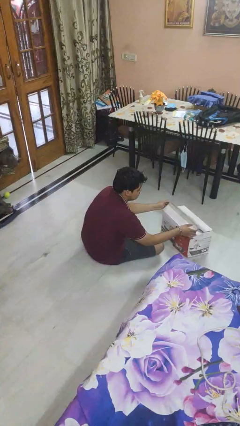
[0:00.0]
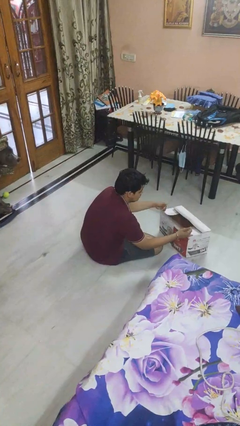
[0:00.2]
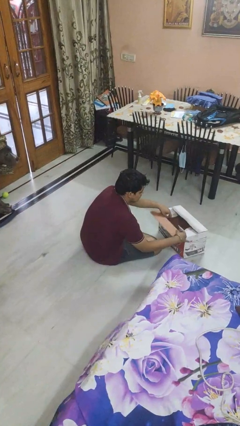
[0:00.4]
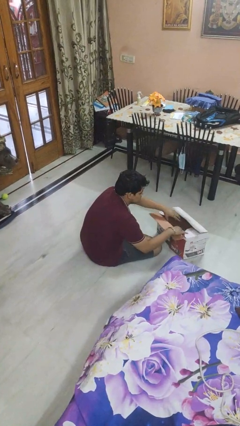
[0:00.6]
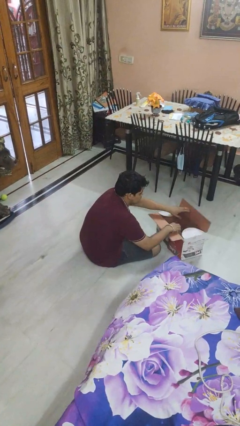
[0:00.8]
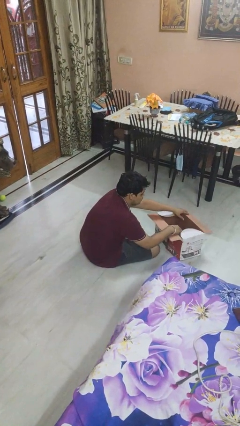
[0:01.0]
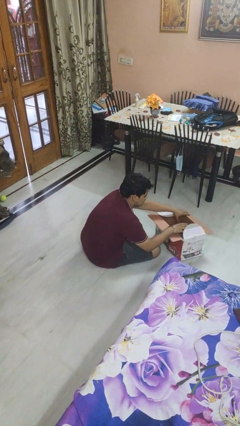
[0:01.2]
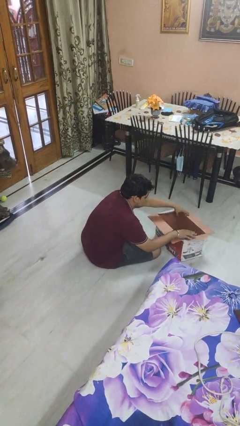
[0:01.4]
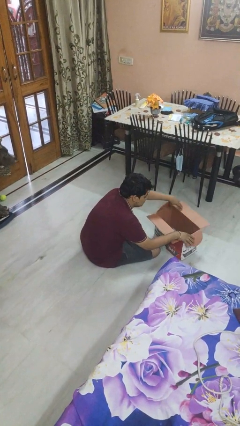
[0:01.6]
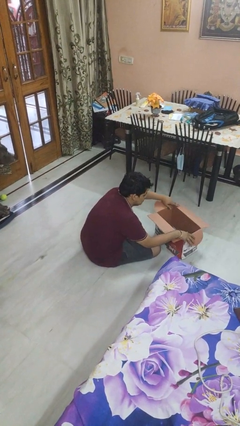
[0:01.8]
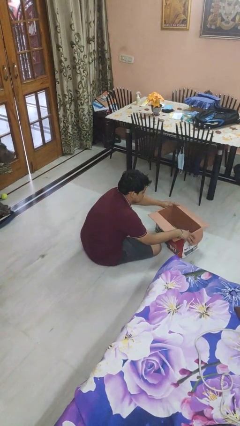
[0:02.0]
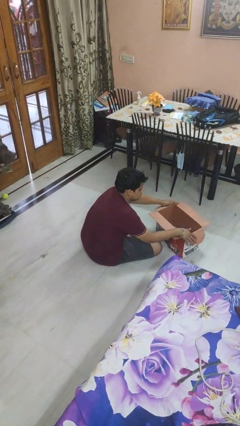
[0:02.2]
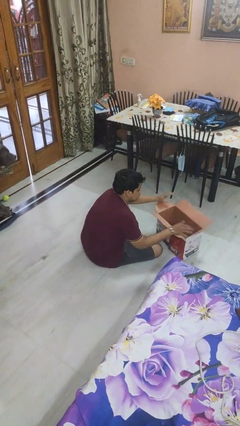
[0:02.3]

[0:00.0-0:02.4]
person opens box

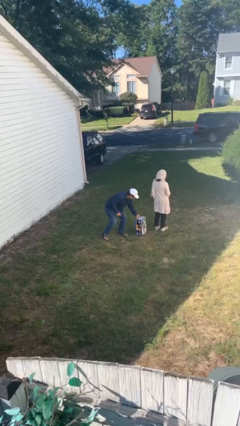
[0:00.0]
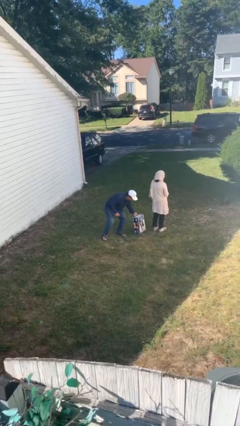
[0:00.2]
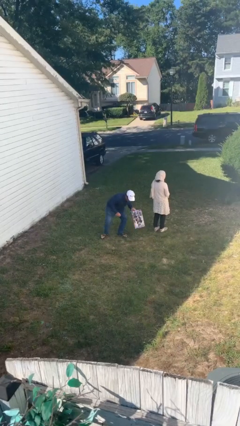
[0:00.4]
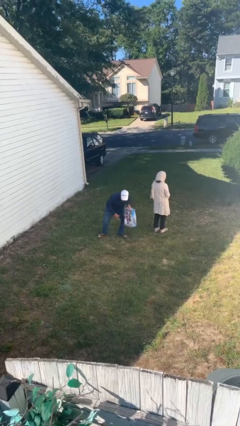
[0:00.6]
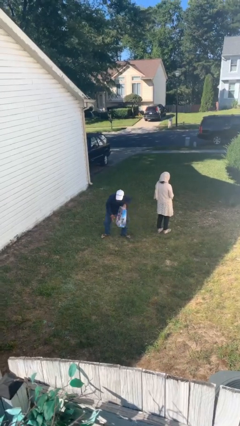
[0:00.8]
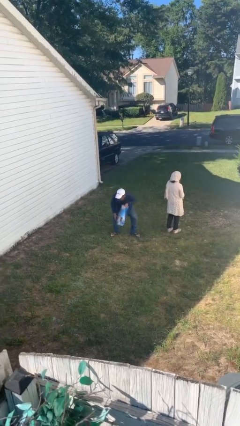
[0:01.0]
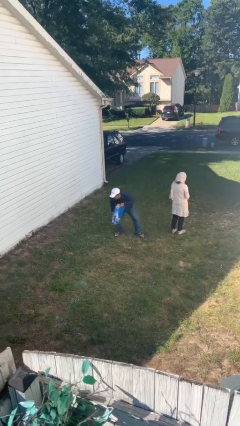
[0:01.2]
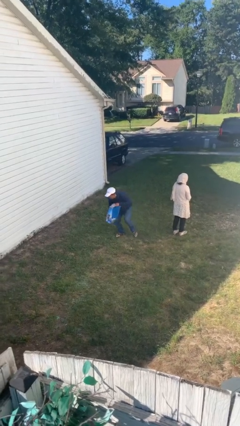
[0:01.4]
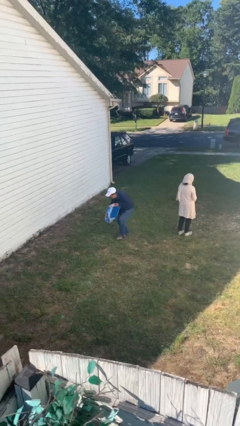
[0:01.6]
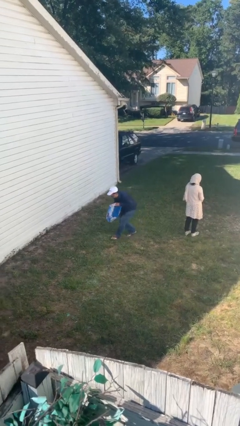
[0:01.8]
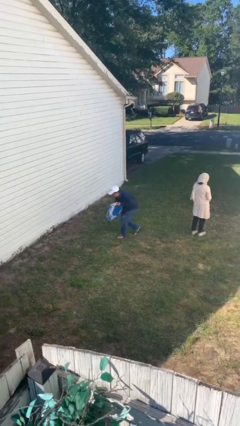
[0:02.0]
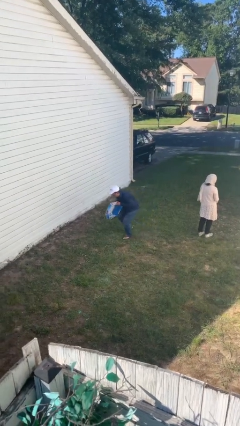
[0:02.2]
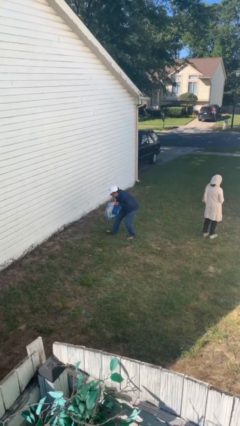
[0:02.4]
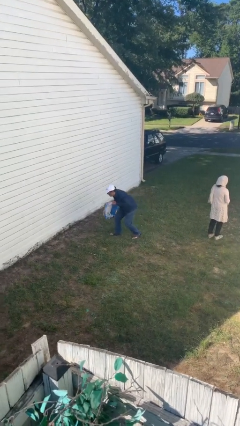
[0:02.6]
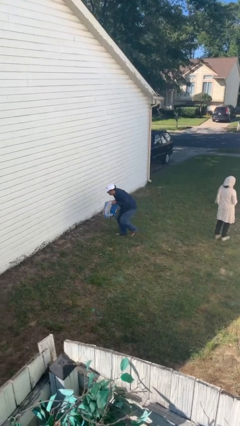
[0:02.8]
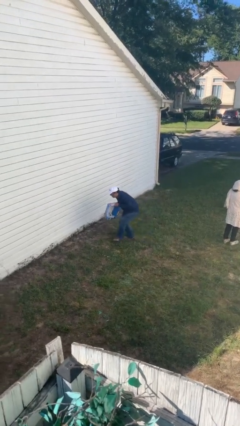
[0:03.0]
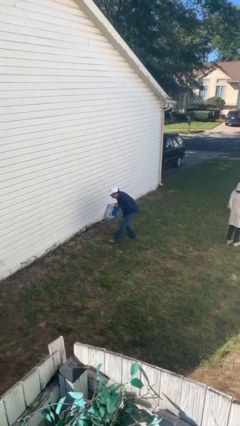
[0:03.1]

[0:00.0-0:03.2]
person steals object from person

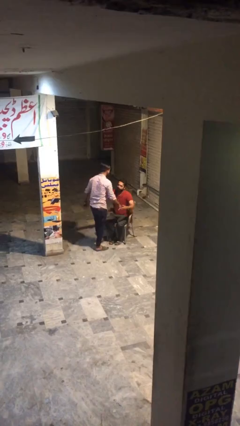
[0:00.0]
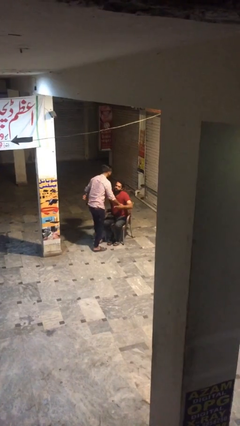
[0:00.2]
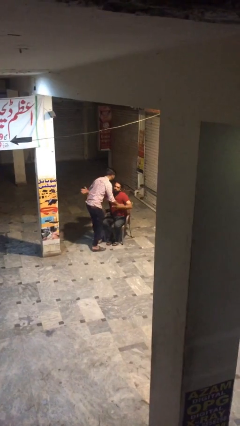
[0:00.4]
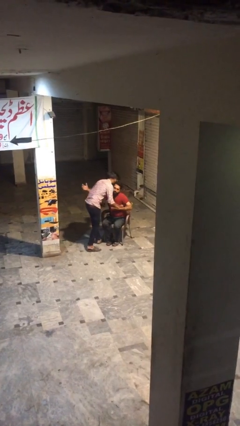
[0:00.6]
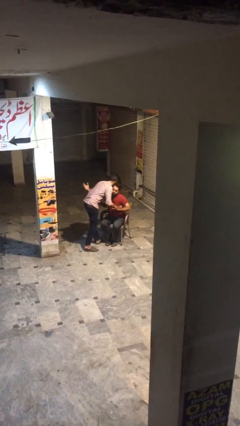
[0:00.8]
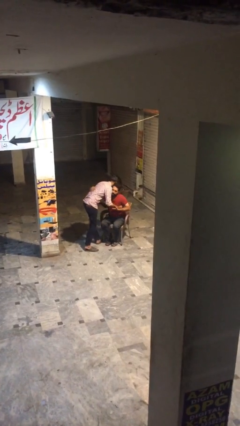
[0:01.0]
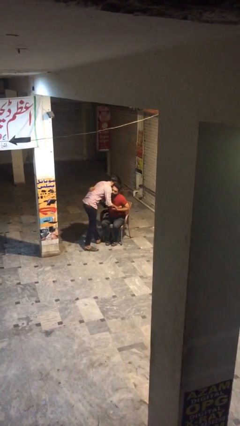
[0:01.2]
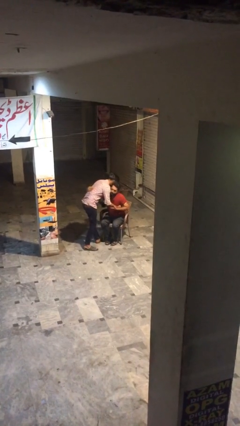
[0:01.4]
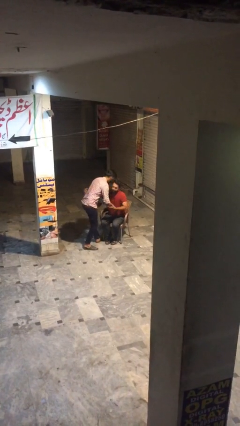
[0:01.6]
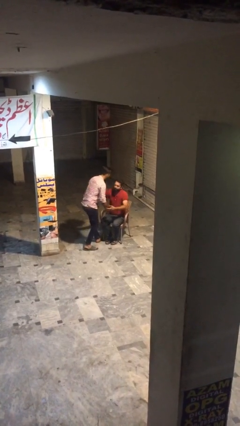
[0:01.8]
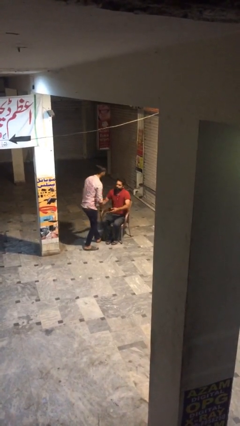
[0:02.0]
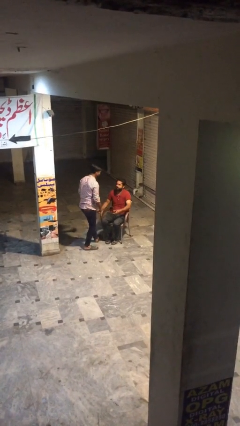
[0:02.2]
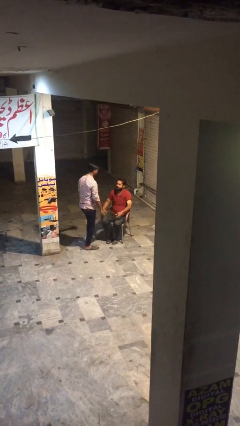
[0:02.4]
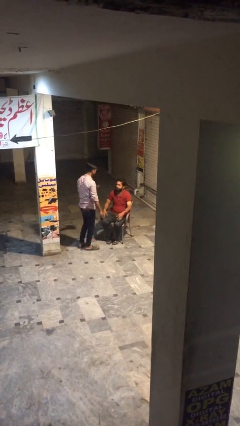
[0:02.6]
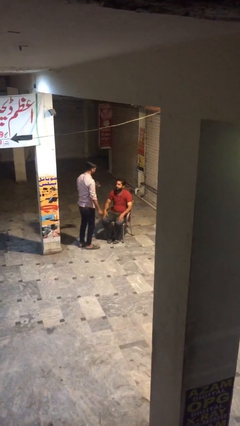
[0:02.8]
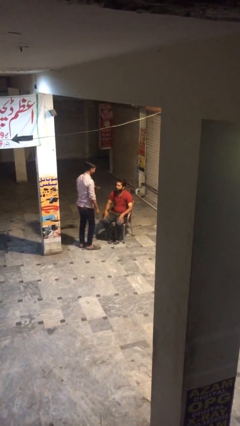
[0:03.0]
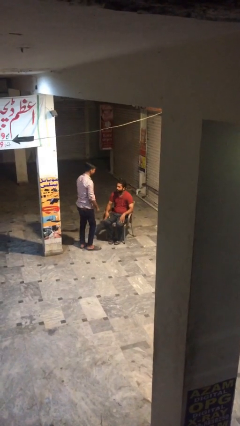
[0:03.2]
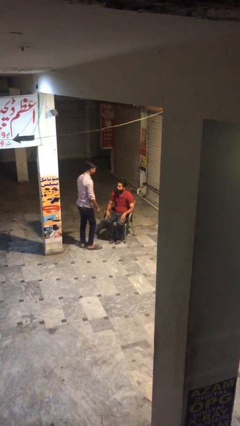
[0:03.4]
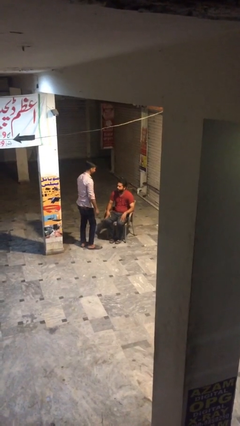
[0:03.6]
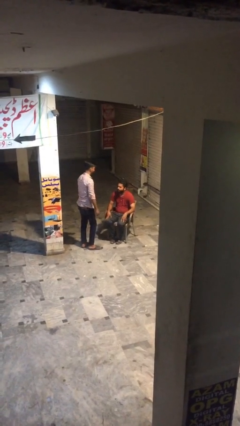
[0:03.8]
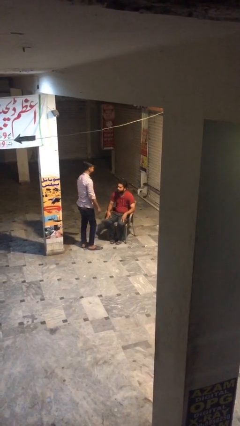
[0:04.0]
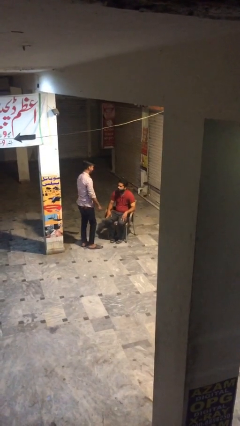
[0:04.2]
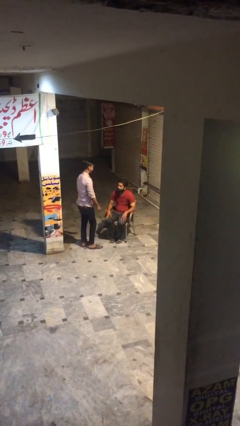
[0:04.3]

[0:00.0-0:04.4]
person embraces person

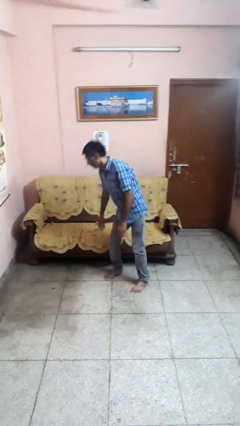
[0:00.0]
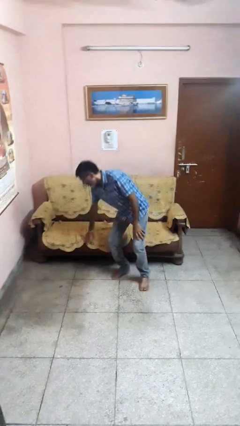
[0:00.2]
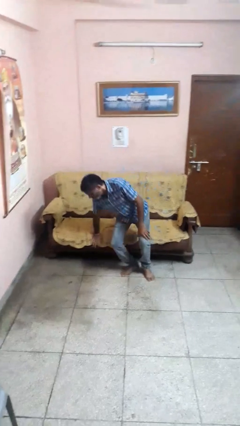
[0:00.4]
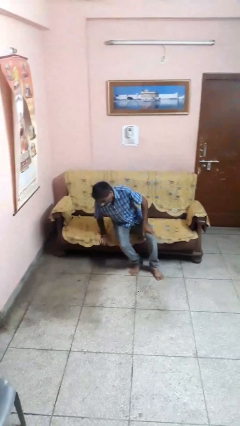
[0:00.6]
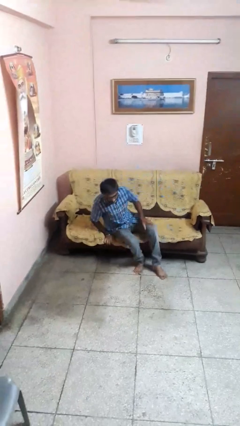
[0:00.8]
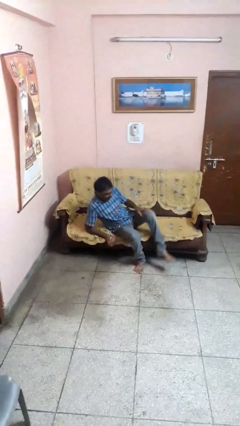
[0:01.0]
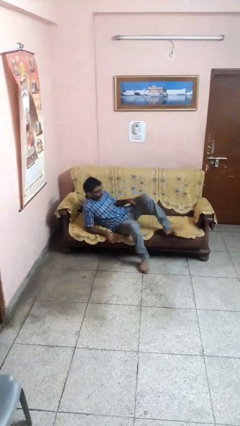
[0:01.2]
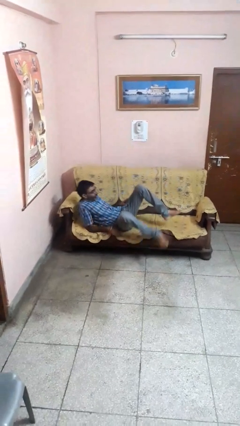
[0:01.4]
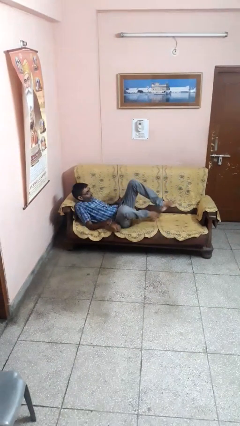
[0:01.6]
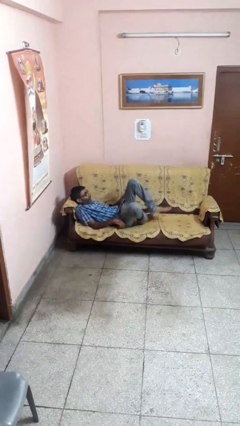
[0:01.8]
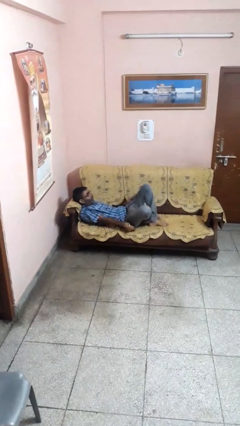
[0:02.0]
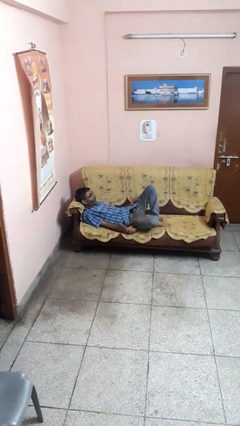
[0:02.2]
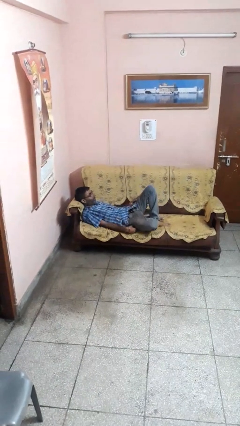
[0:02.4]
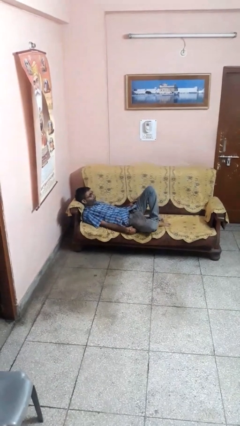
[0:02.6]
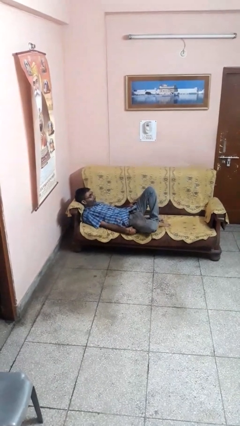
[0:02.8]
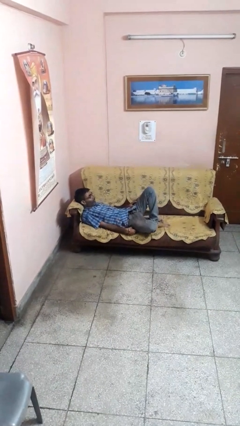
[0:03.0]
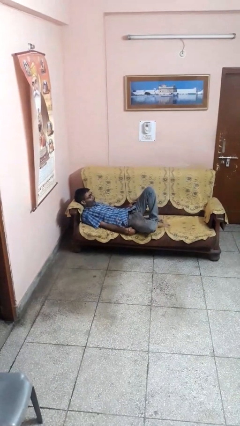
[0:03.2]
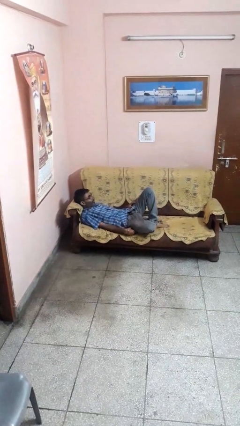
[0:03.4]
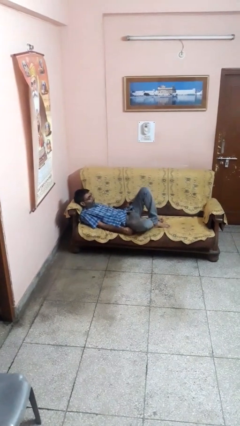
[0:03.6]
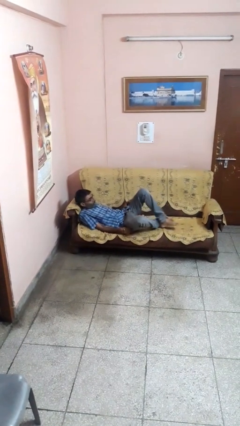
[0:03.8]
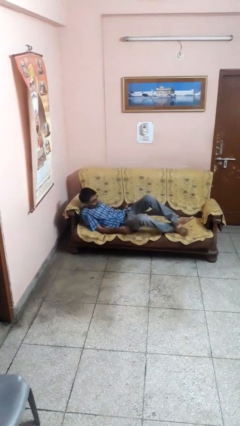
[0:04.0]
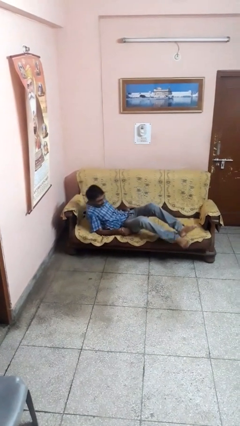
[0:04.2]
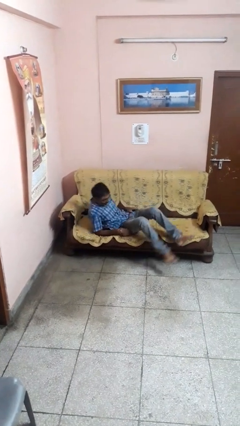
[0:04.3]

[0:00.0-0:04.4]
person lies down on couch

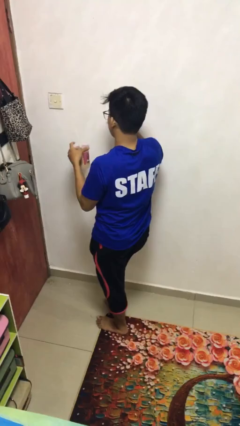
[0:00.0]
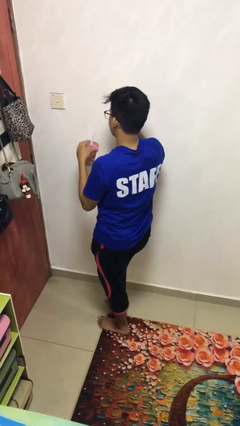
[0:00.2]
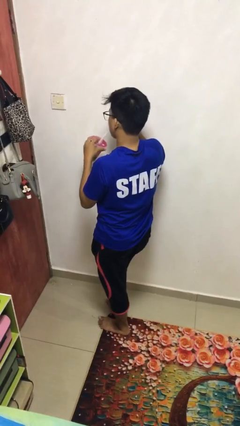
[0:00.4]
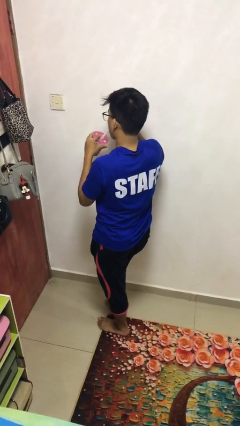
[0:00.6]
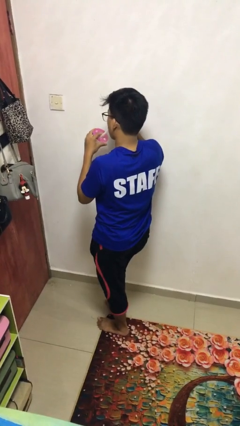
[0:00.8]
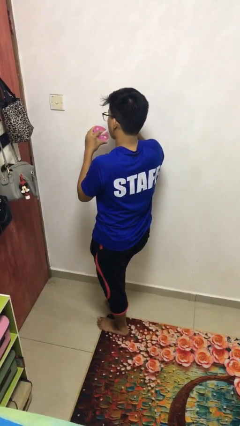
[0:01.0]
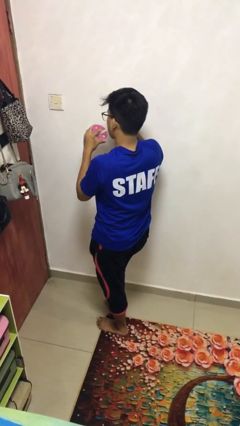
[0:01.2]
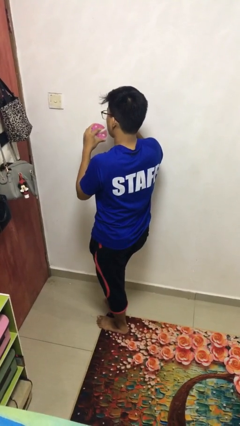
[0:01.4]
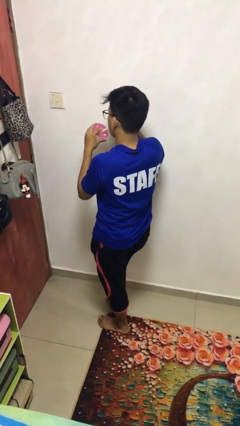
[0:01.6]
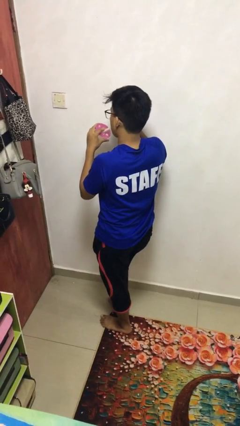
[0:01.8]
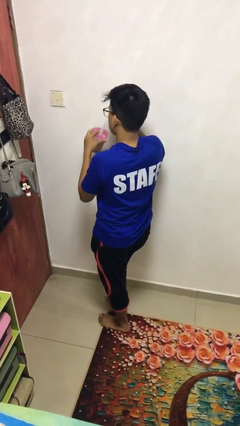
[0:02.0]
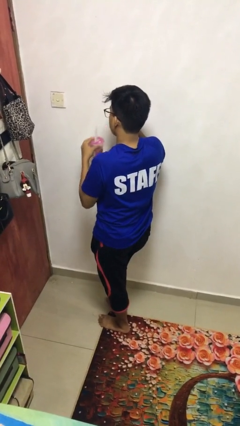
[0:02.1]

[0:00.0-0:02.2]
person drinks from straw

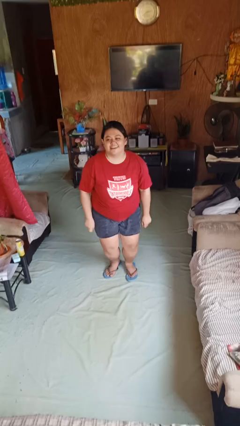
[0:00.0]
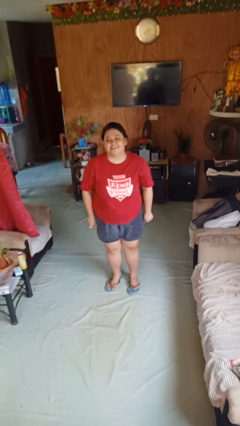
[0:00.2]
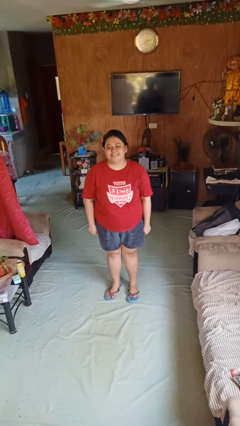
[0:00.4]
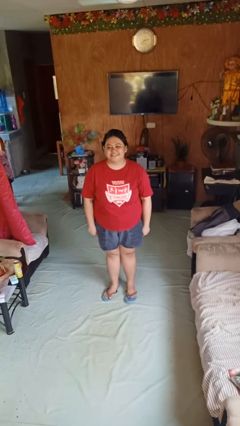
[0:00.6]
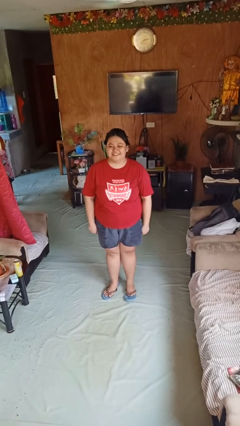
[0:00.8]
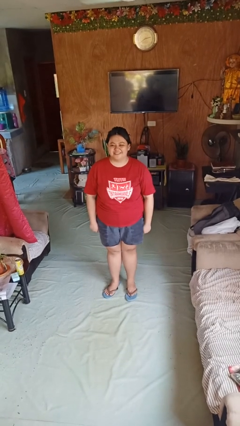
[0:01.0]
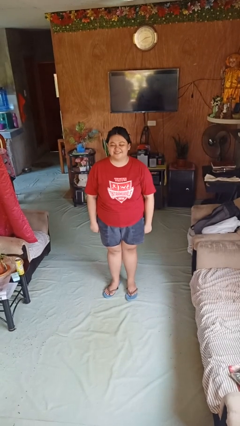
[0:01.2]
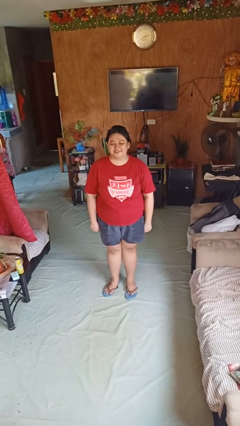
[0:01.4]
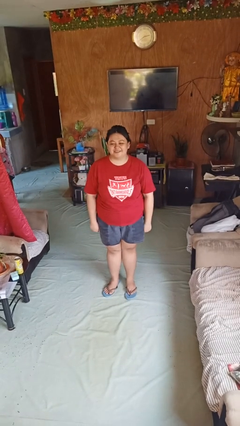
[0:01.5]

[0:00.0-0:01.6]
person stands up
